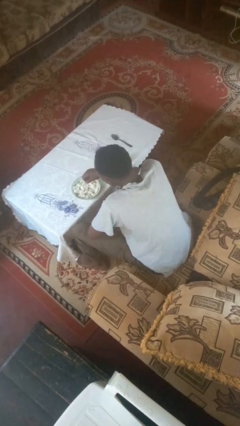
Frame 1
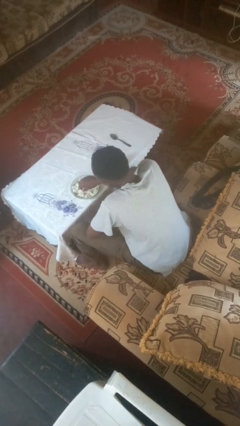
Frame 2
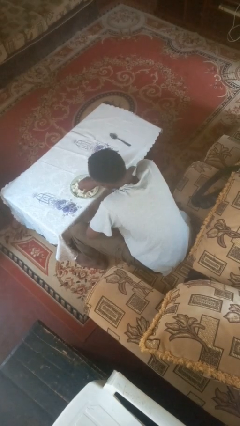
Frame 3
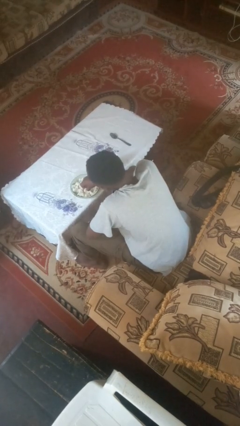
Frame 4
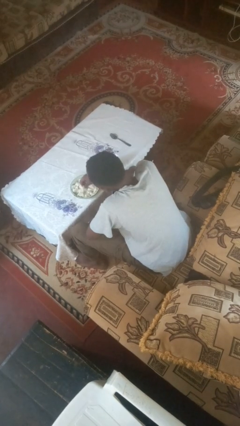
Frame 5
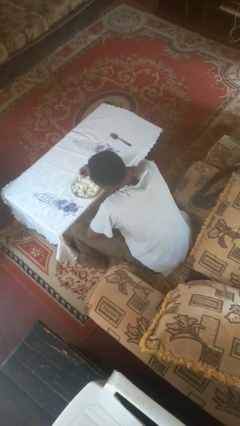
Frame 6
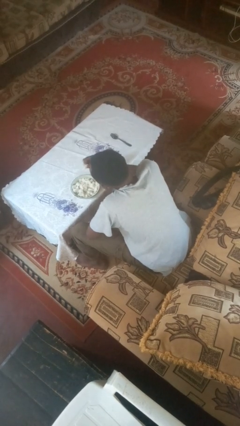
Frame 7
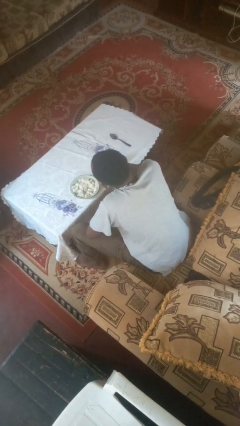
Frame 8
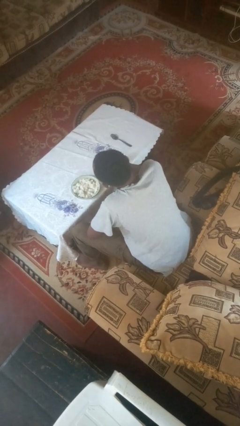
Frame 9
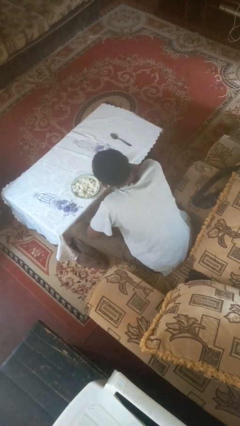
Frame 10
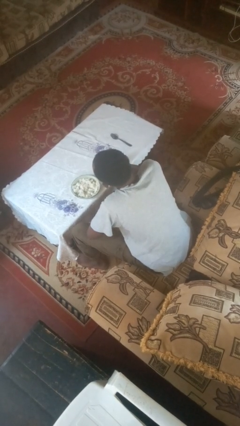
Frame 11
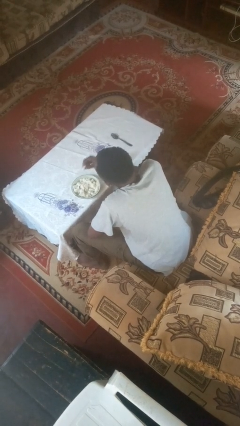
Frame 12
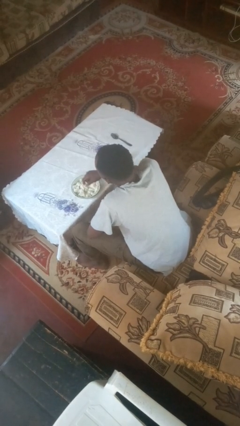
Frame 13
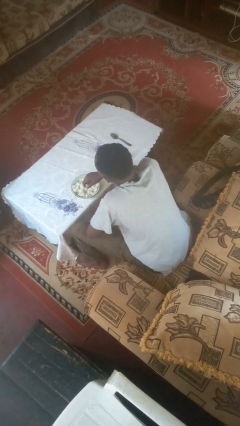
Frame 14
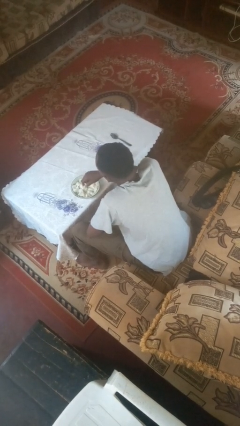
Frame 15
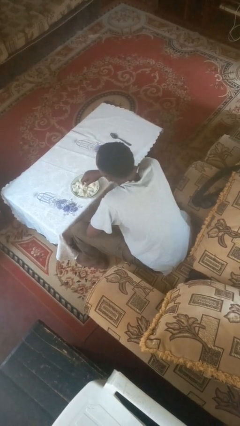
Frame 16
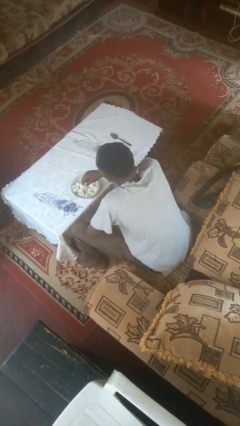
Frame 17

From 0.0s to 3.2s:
person eats with hands

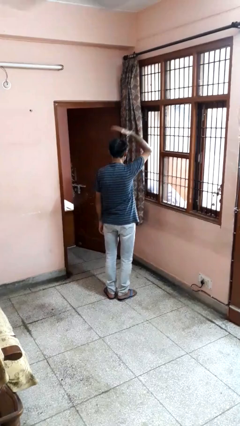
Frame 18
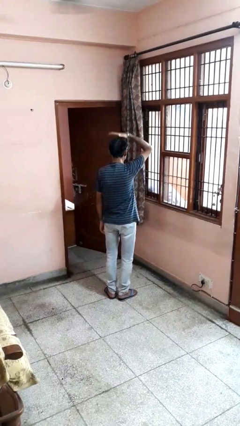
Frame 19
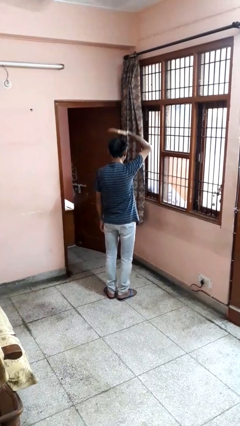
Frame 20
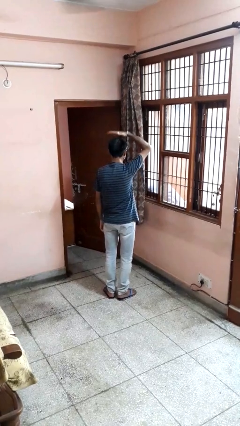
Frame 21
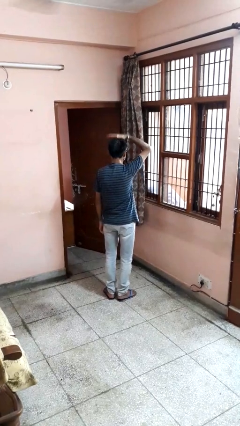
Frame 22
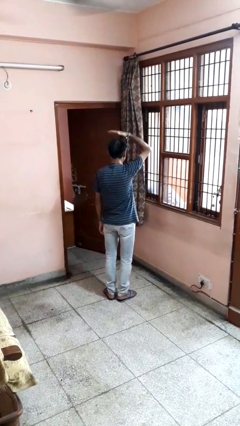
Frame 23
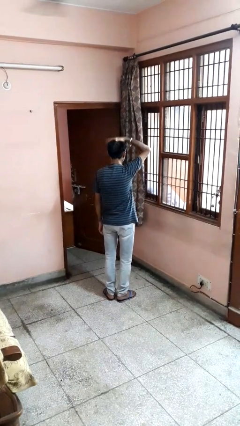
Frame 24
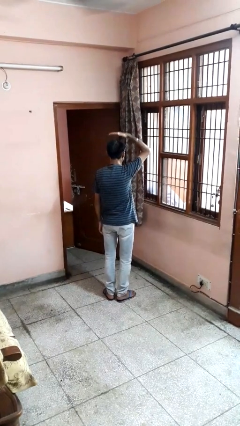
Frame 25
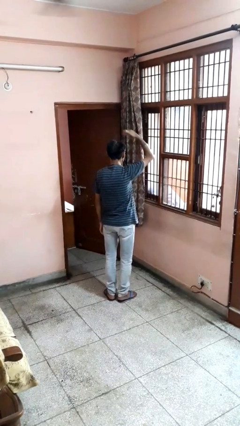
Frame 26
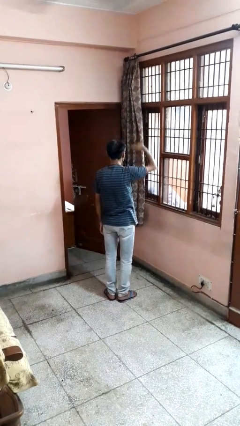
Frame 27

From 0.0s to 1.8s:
person pats head

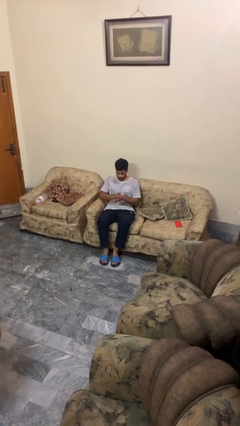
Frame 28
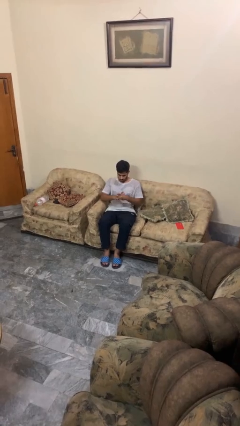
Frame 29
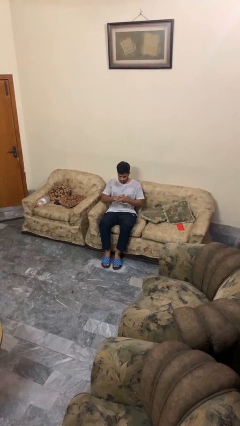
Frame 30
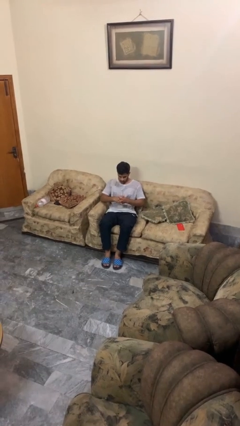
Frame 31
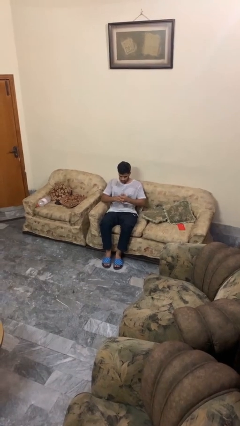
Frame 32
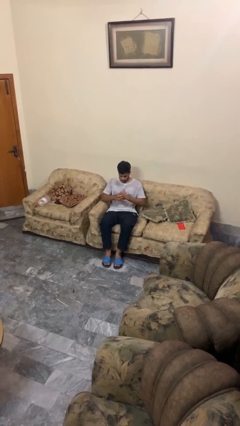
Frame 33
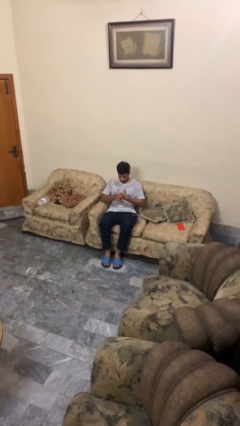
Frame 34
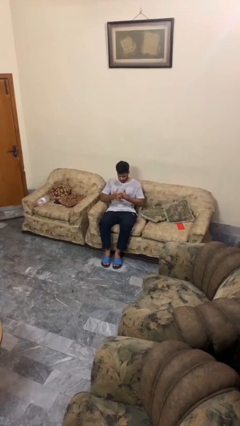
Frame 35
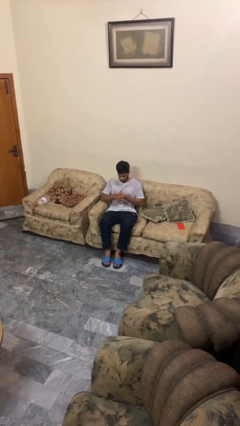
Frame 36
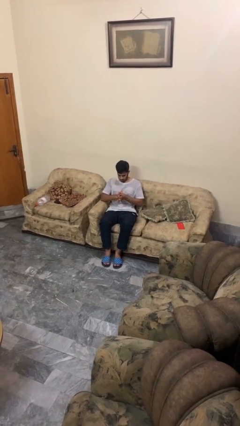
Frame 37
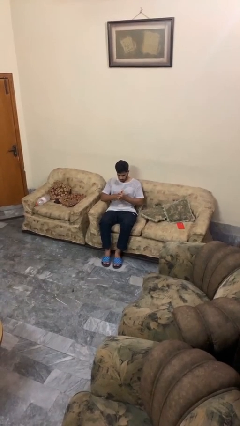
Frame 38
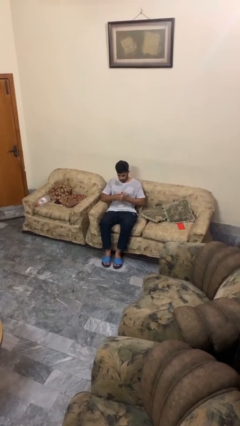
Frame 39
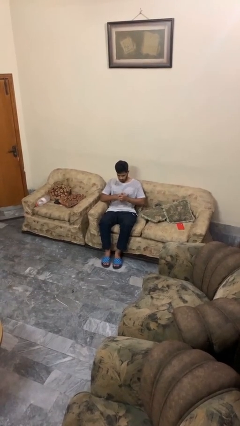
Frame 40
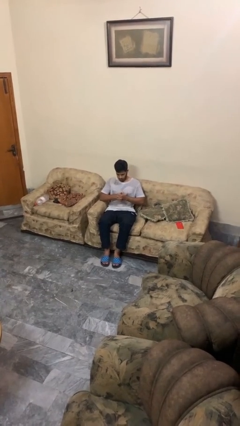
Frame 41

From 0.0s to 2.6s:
person cracks knuckles

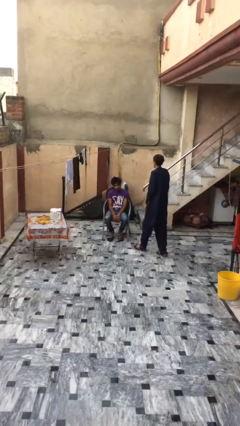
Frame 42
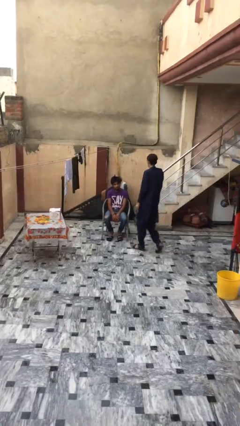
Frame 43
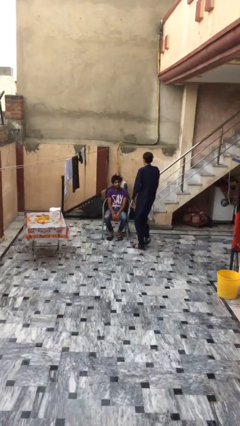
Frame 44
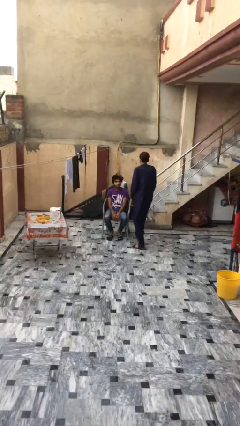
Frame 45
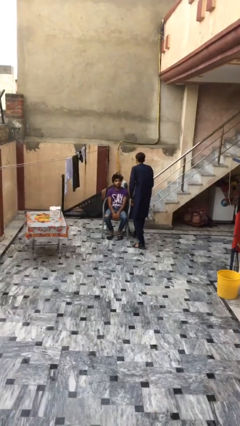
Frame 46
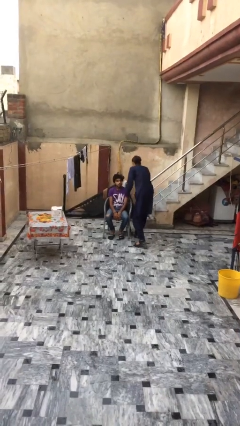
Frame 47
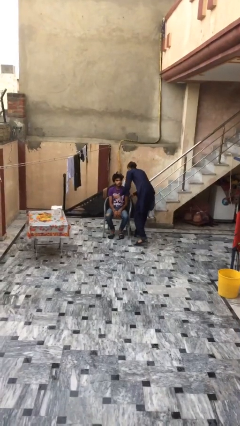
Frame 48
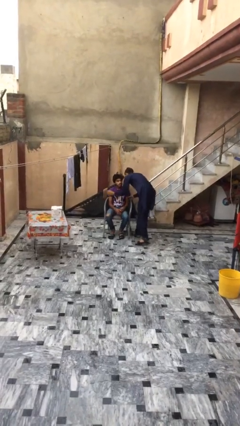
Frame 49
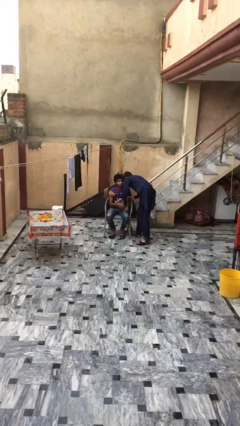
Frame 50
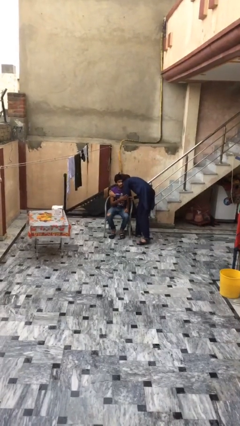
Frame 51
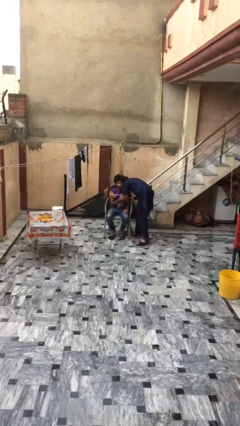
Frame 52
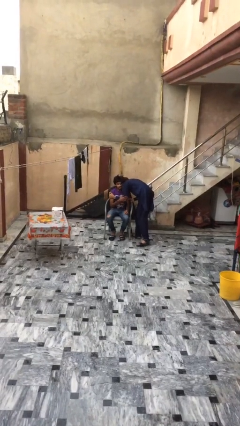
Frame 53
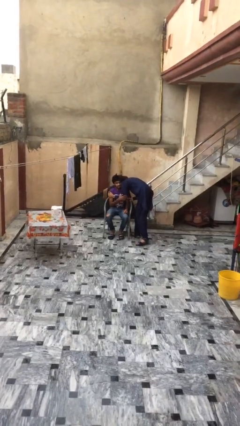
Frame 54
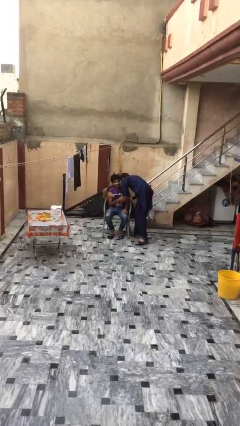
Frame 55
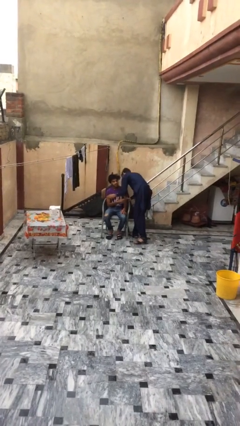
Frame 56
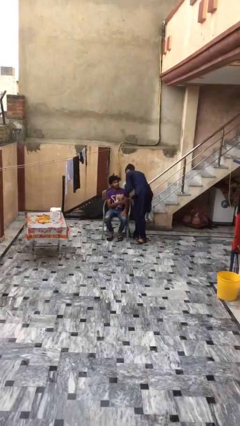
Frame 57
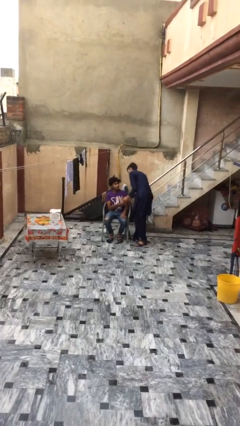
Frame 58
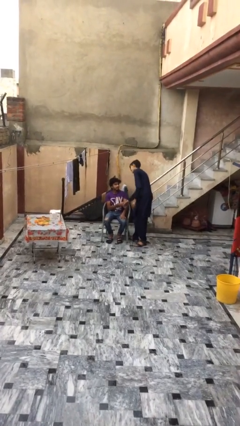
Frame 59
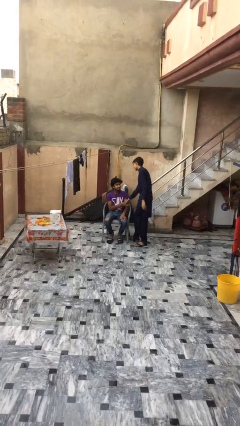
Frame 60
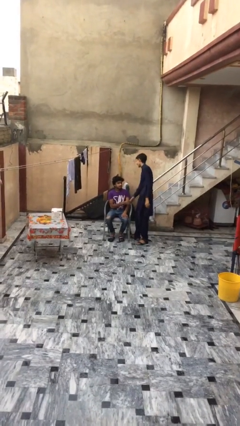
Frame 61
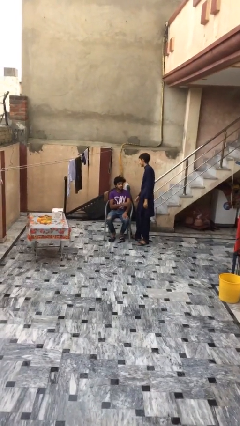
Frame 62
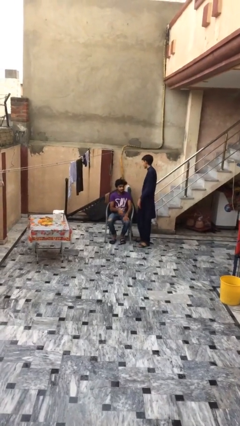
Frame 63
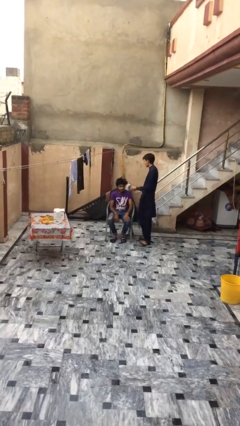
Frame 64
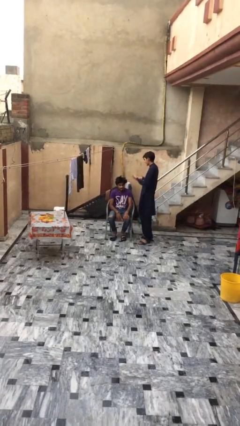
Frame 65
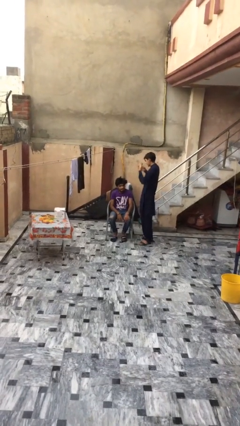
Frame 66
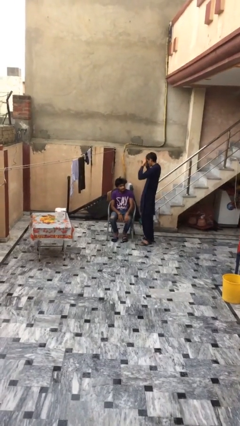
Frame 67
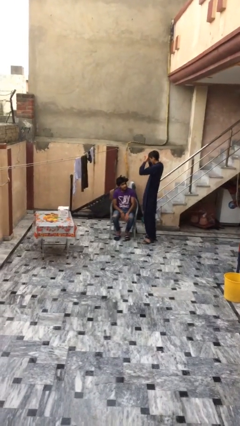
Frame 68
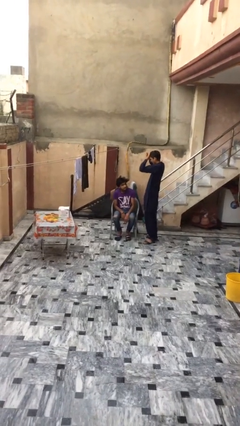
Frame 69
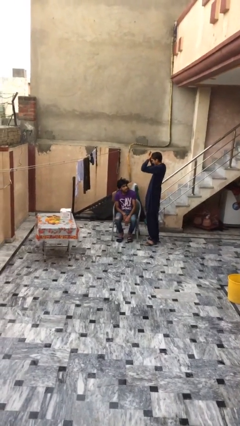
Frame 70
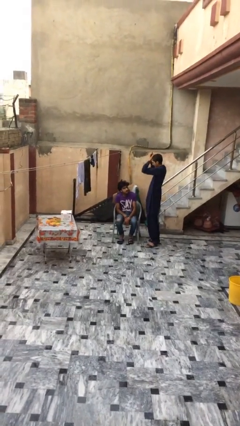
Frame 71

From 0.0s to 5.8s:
person embraces person

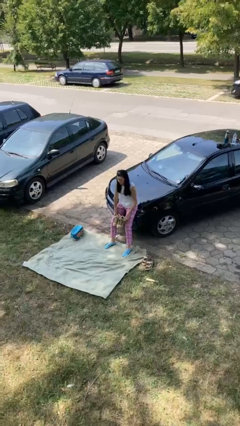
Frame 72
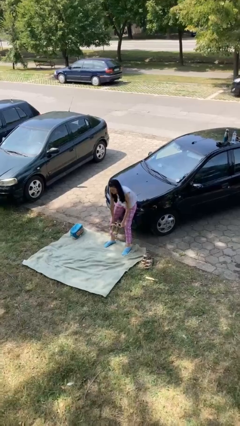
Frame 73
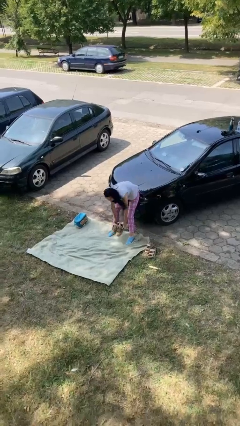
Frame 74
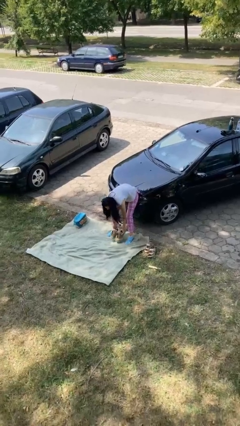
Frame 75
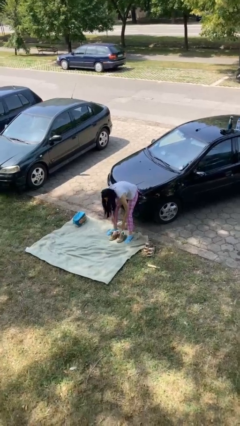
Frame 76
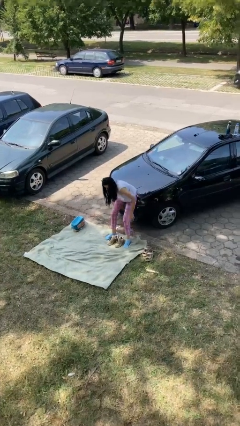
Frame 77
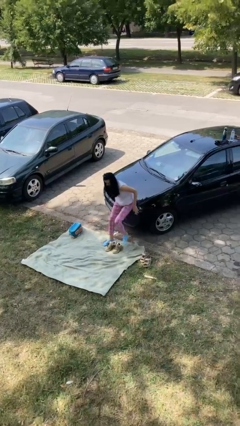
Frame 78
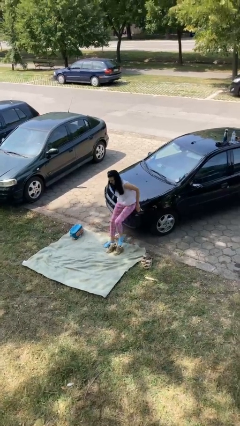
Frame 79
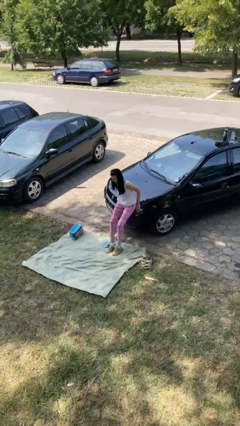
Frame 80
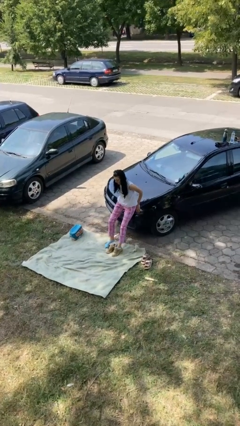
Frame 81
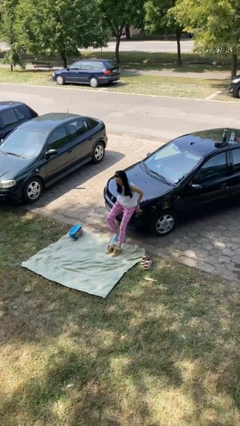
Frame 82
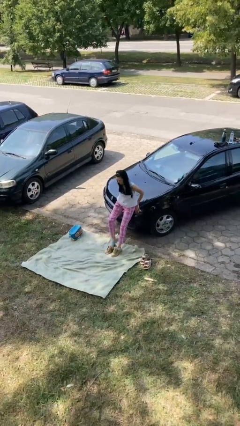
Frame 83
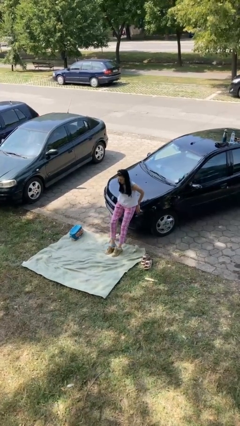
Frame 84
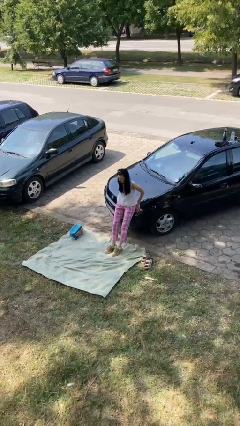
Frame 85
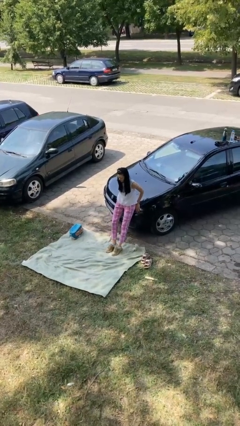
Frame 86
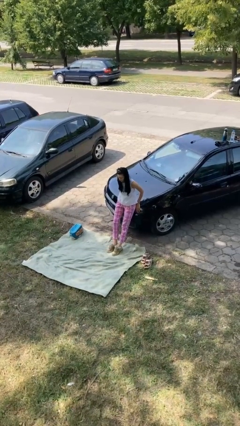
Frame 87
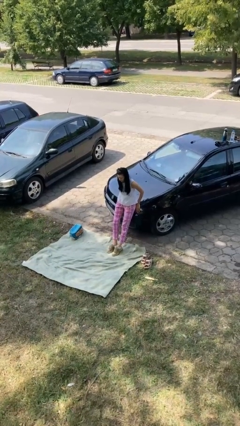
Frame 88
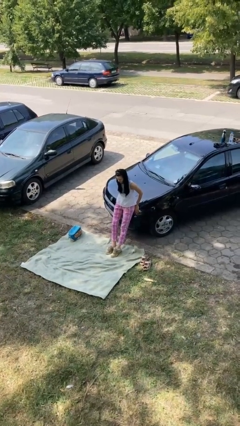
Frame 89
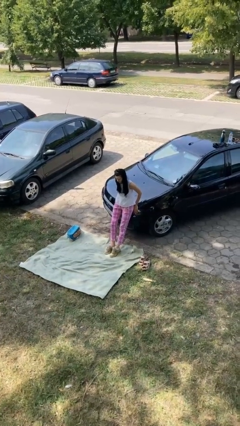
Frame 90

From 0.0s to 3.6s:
person puts on shoes

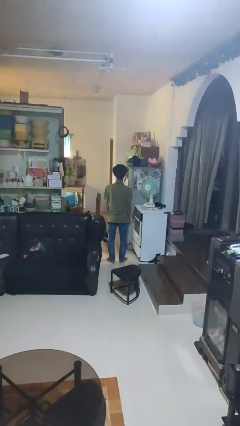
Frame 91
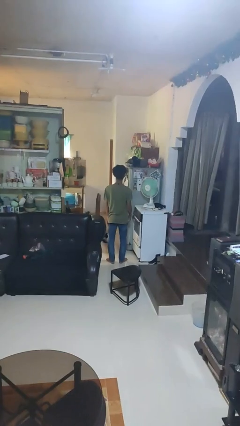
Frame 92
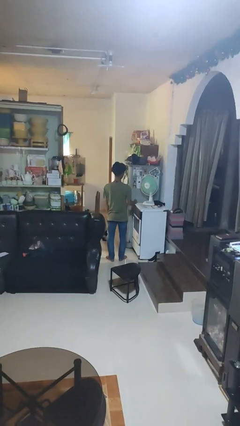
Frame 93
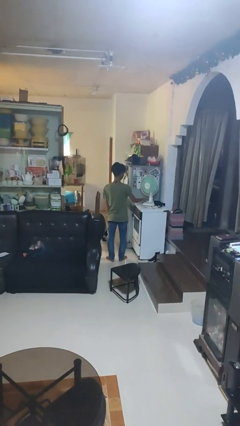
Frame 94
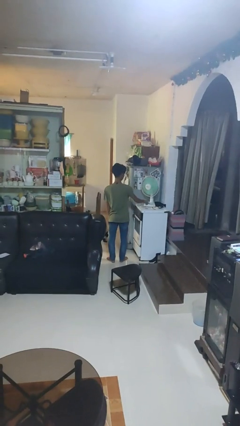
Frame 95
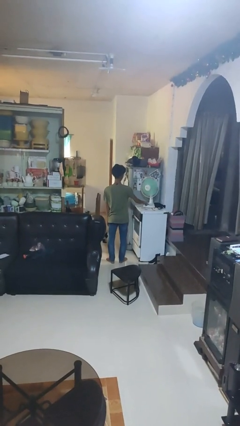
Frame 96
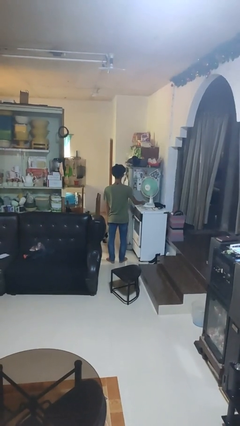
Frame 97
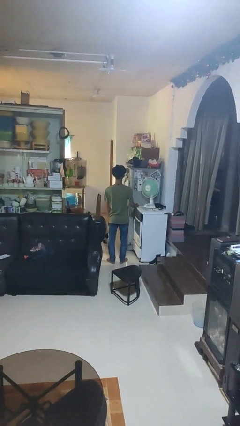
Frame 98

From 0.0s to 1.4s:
person turns off fan
